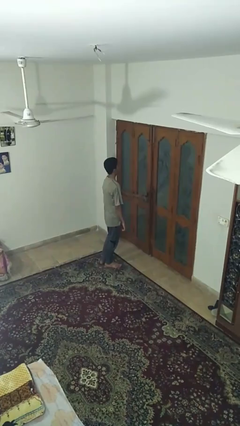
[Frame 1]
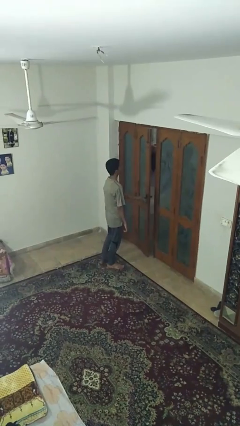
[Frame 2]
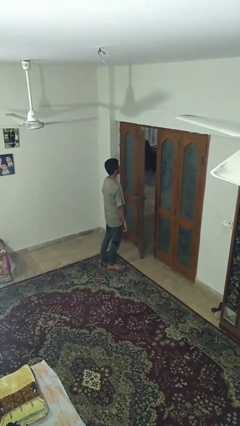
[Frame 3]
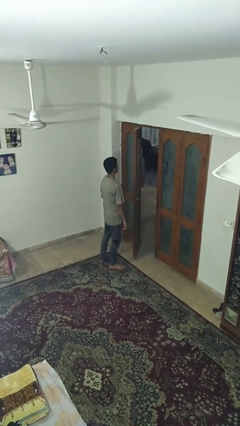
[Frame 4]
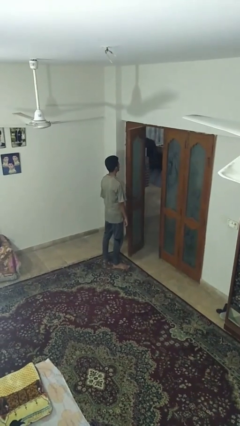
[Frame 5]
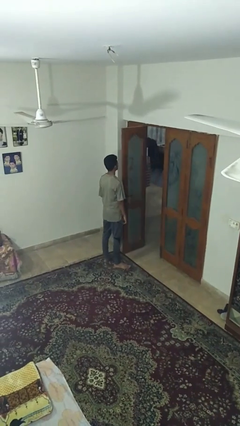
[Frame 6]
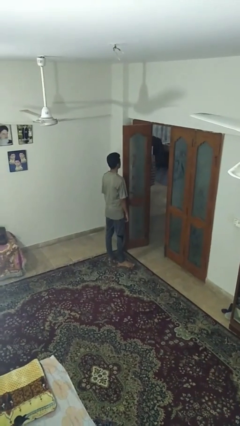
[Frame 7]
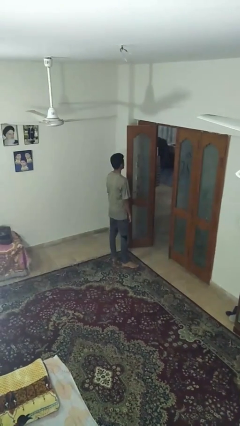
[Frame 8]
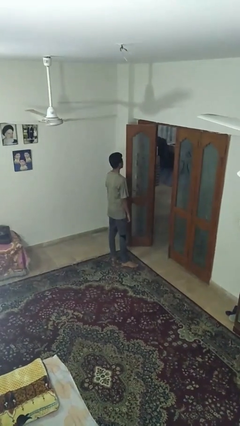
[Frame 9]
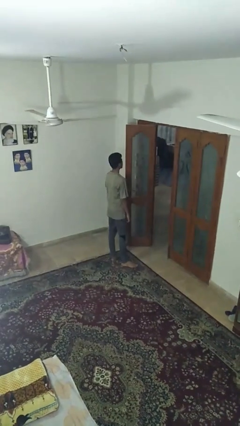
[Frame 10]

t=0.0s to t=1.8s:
person opens facility door

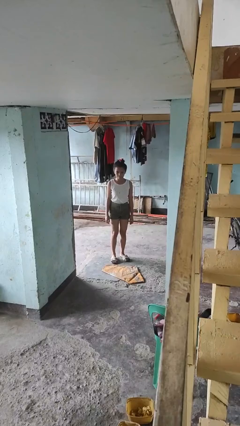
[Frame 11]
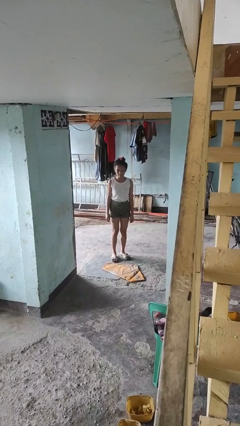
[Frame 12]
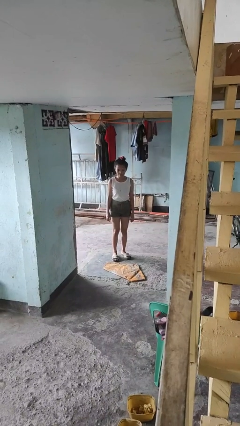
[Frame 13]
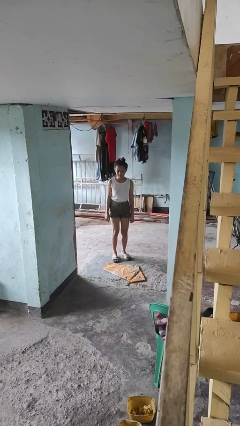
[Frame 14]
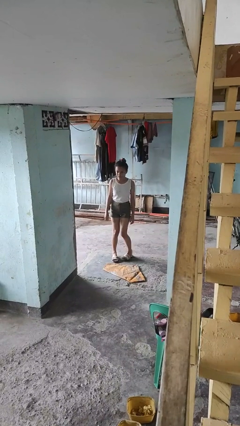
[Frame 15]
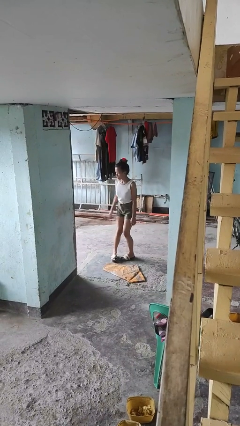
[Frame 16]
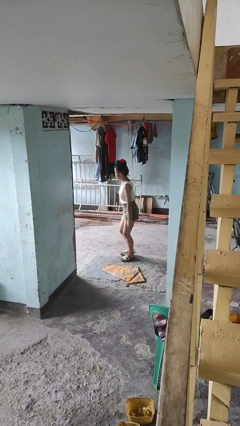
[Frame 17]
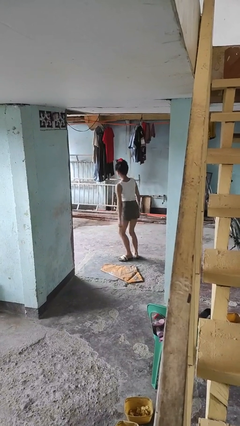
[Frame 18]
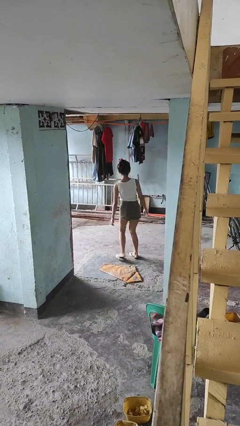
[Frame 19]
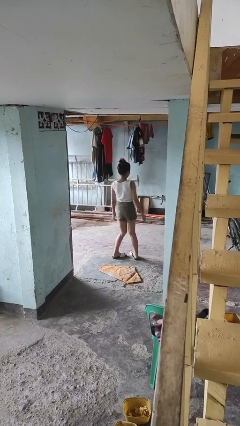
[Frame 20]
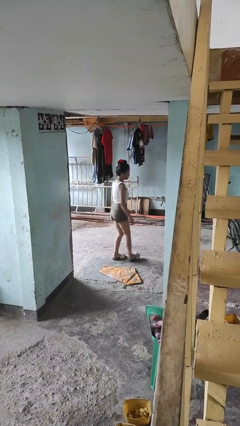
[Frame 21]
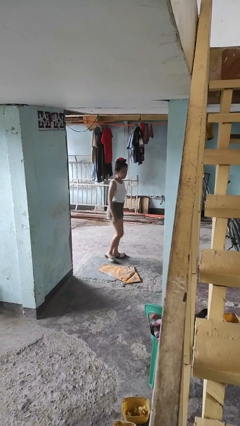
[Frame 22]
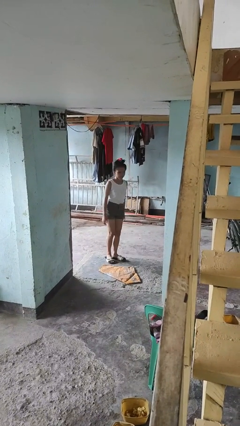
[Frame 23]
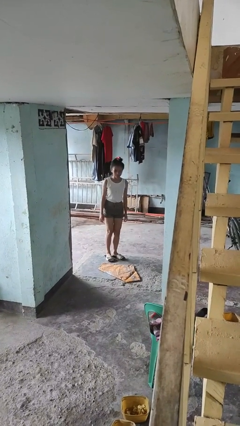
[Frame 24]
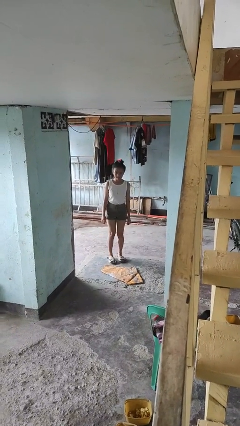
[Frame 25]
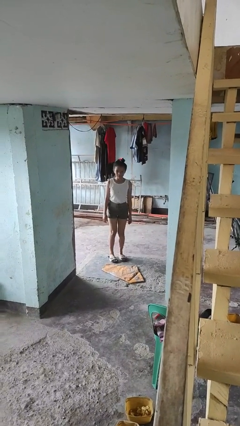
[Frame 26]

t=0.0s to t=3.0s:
person twirls

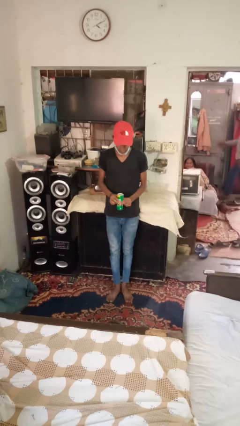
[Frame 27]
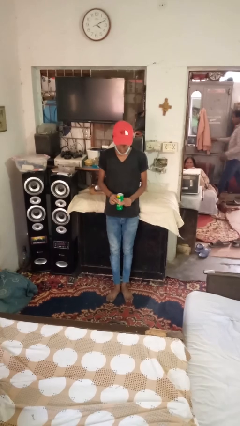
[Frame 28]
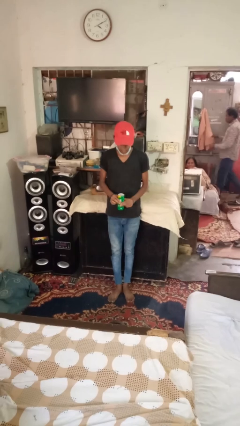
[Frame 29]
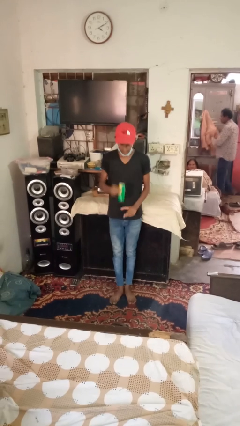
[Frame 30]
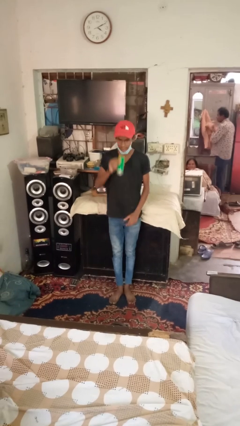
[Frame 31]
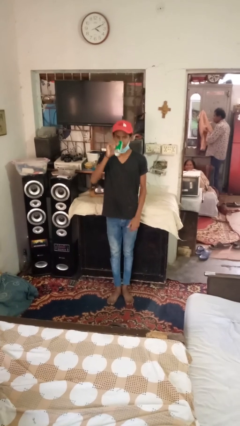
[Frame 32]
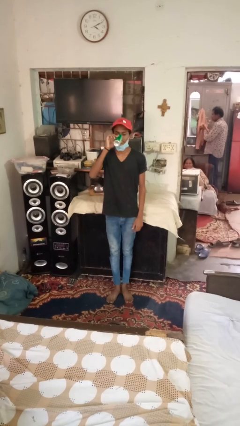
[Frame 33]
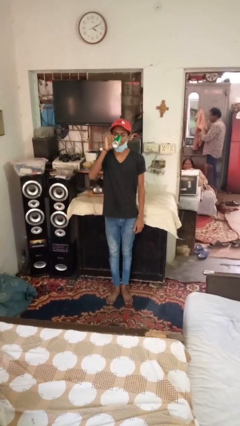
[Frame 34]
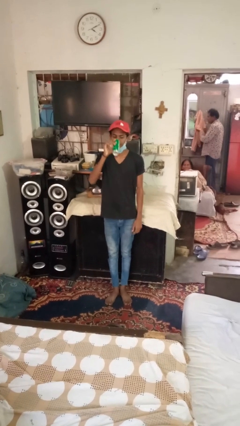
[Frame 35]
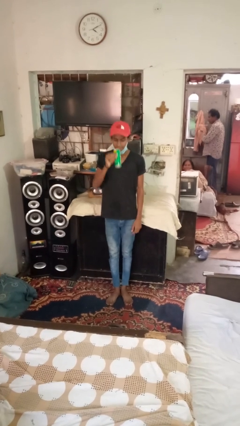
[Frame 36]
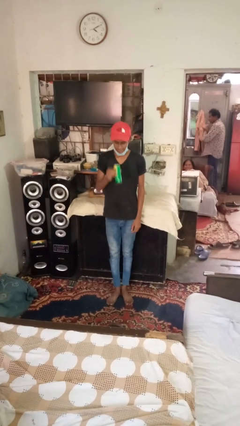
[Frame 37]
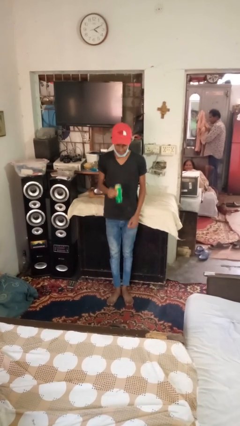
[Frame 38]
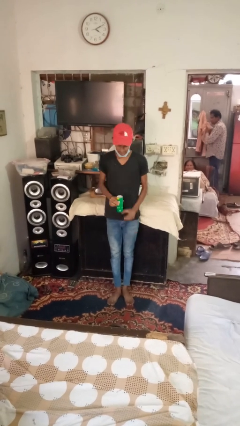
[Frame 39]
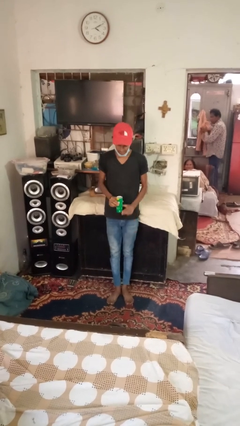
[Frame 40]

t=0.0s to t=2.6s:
person drinks from beverage can

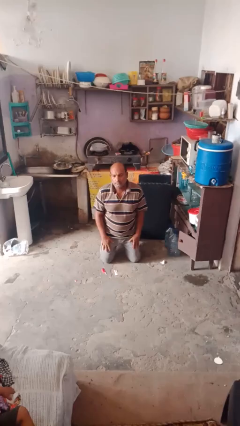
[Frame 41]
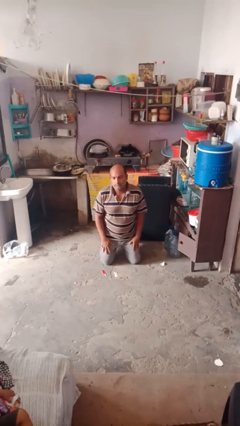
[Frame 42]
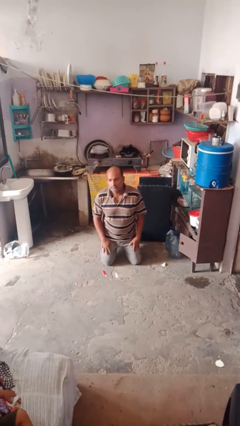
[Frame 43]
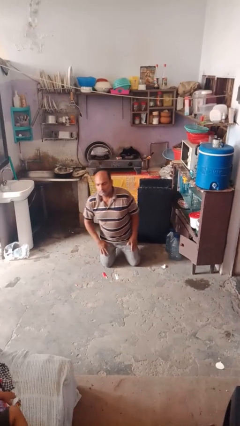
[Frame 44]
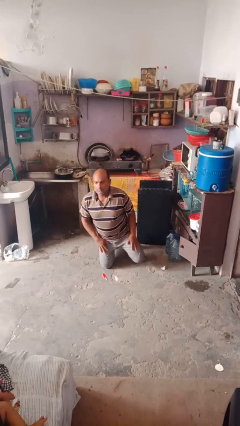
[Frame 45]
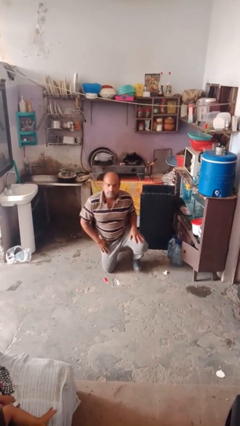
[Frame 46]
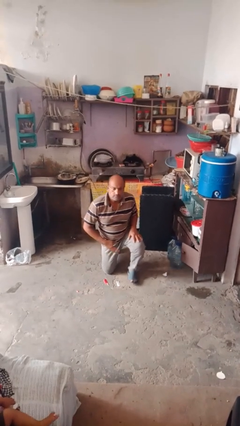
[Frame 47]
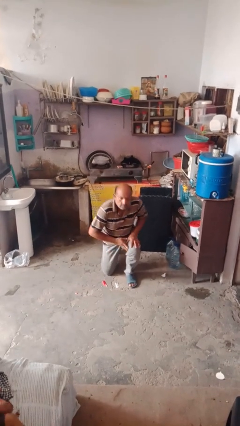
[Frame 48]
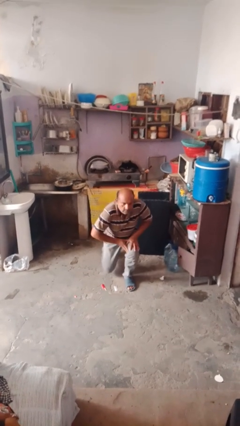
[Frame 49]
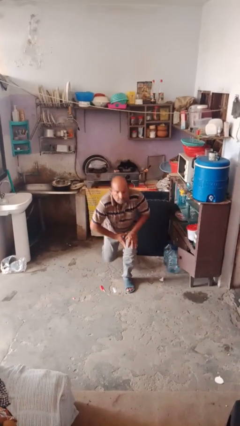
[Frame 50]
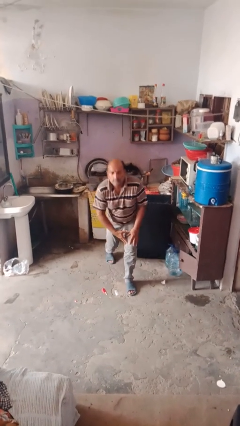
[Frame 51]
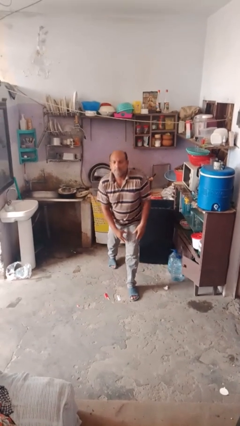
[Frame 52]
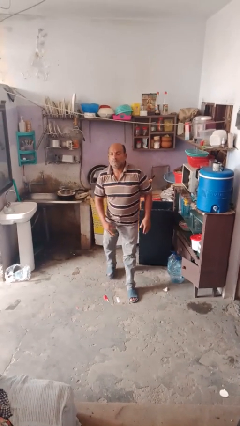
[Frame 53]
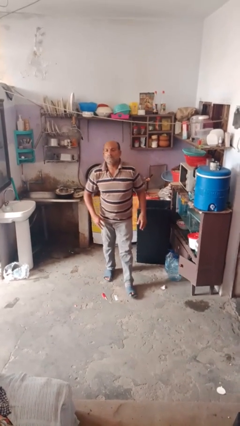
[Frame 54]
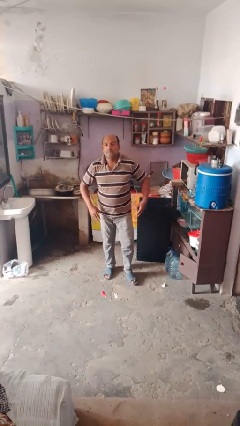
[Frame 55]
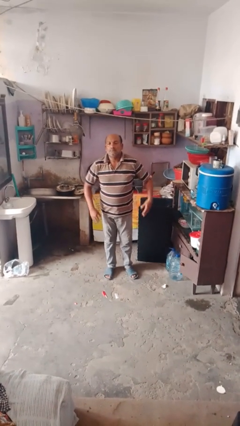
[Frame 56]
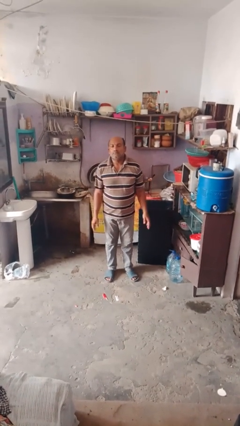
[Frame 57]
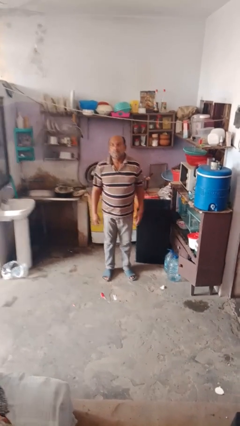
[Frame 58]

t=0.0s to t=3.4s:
person stands up from floor

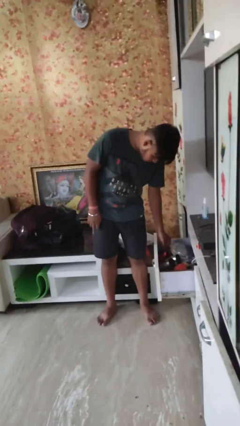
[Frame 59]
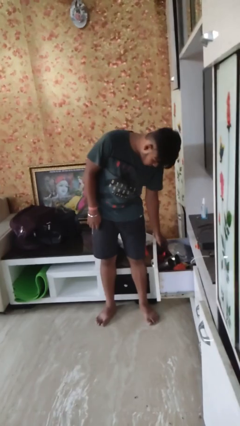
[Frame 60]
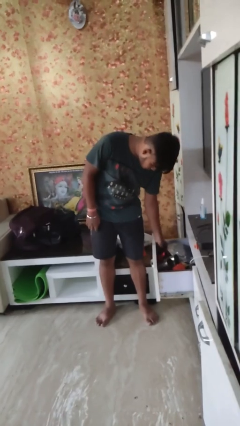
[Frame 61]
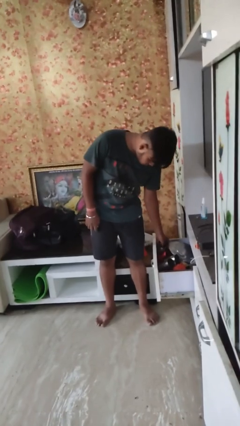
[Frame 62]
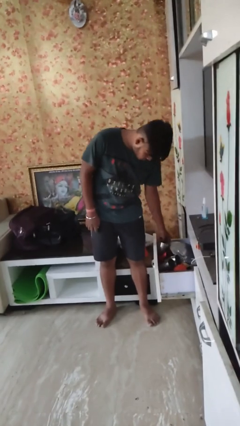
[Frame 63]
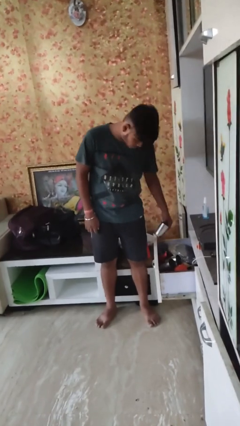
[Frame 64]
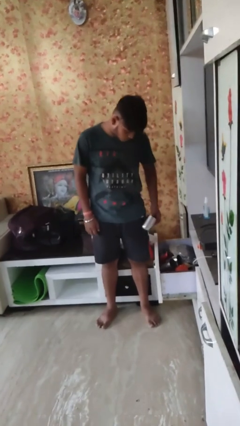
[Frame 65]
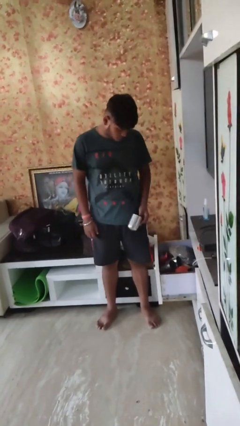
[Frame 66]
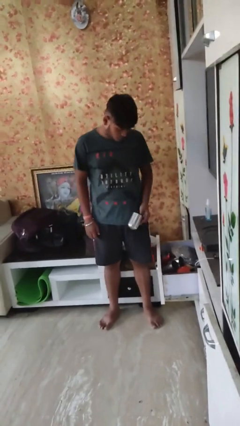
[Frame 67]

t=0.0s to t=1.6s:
person takes object from kitchen drawer

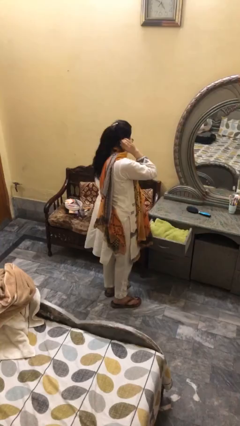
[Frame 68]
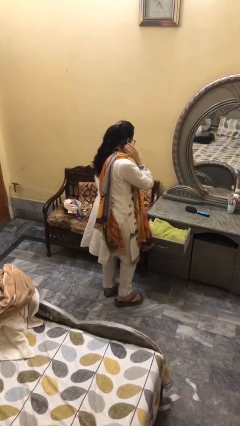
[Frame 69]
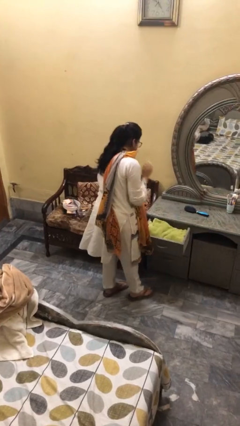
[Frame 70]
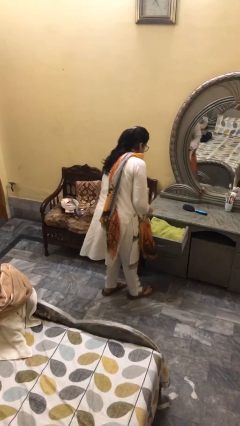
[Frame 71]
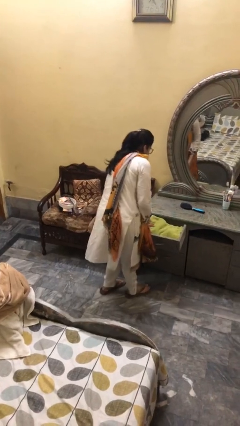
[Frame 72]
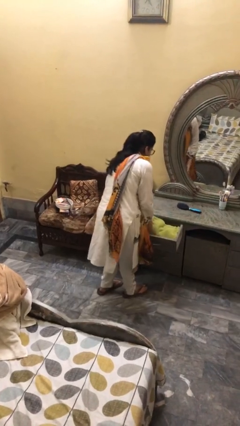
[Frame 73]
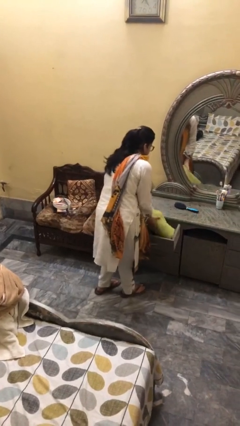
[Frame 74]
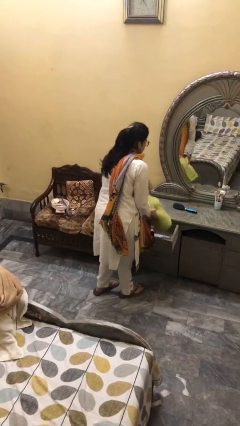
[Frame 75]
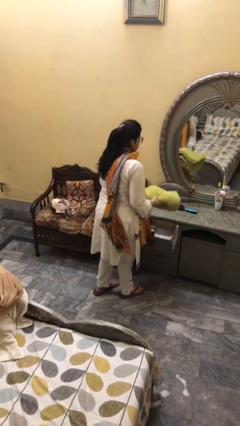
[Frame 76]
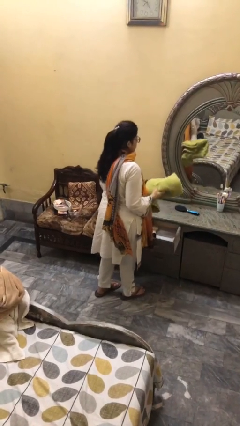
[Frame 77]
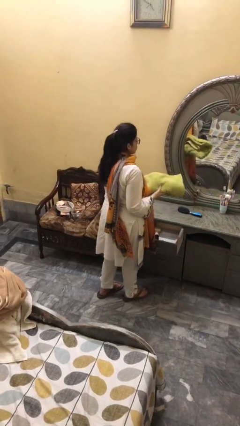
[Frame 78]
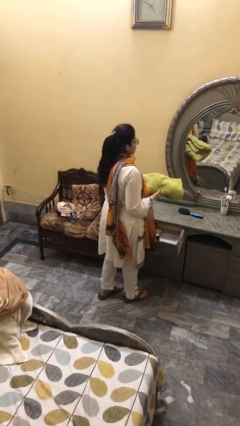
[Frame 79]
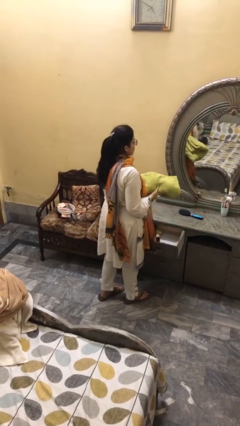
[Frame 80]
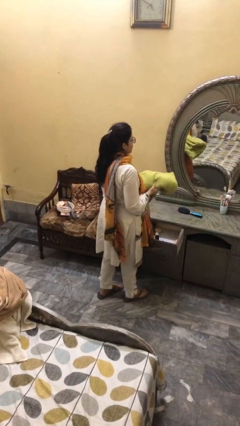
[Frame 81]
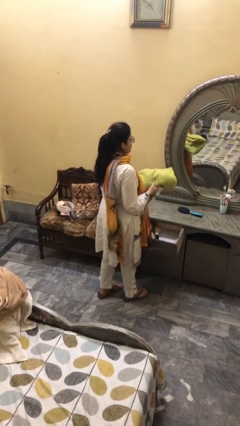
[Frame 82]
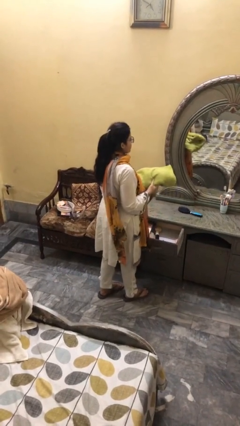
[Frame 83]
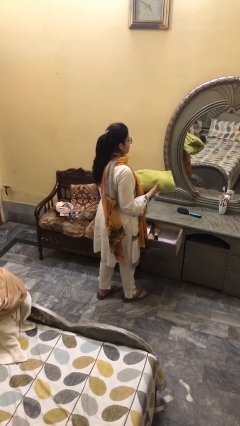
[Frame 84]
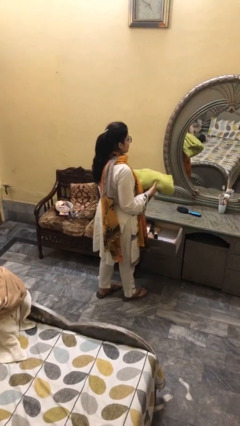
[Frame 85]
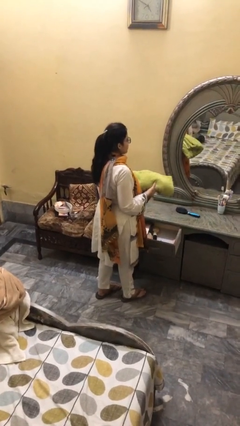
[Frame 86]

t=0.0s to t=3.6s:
person takes clothes from dresser

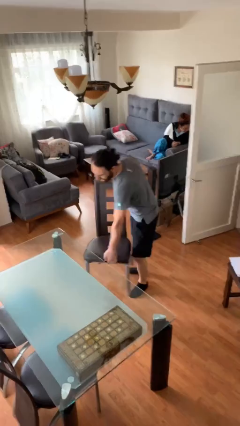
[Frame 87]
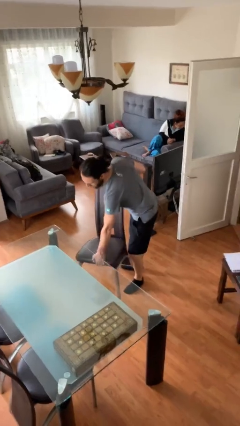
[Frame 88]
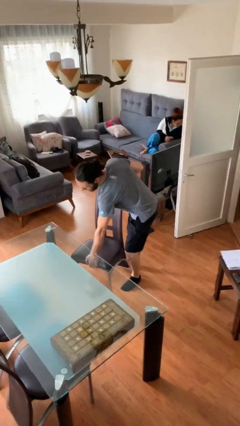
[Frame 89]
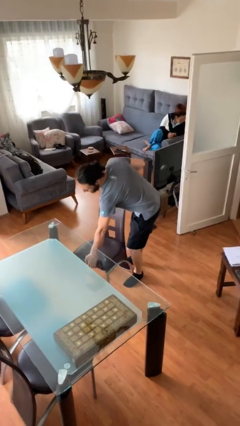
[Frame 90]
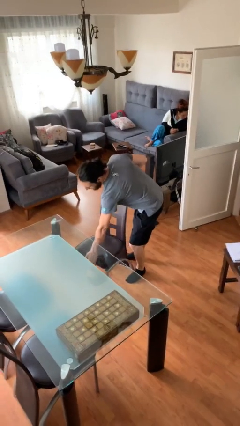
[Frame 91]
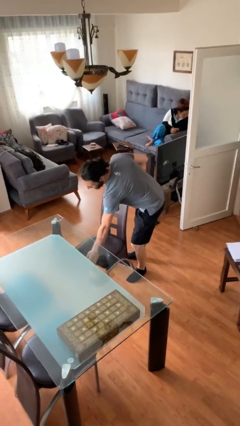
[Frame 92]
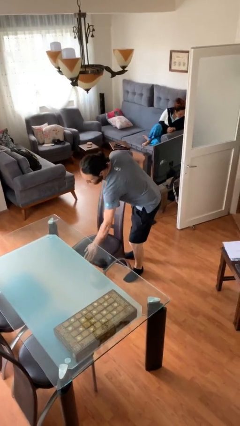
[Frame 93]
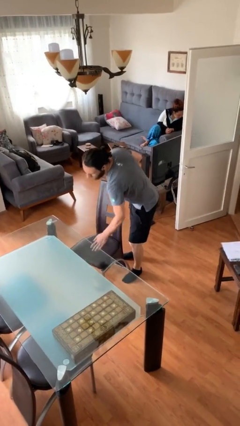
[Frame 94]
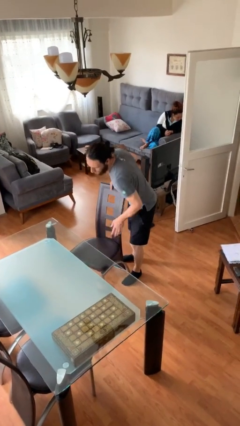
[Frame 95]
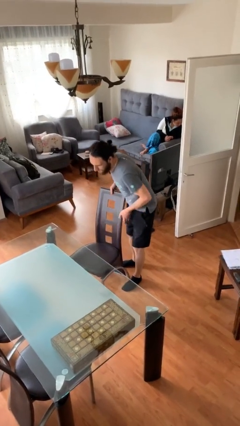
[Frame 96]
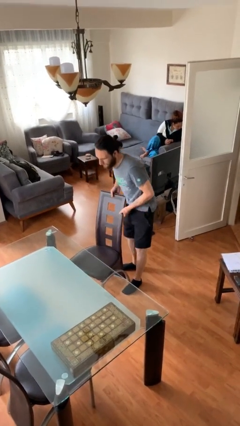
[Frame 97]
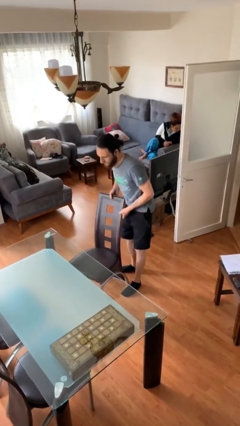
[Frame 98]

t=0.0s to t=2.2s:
person puts down object on floor
